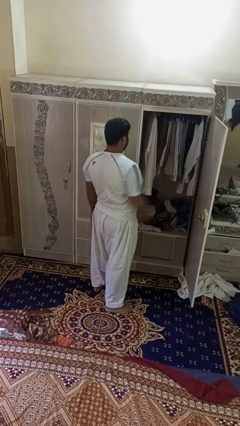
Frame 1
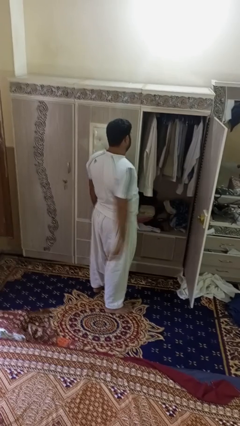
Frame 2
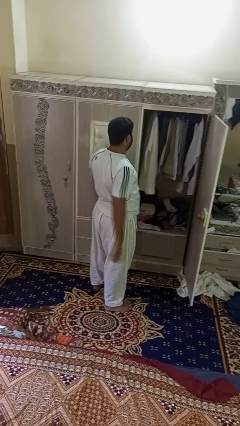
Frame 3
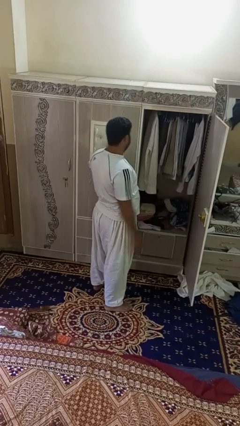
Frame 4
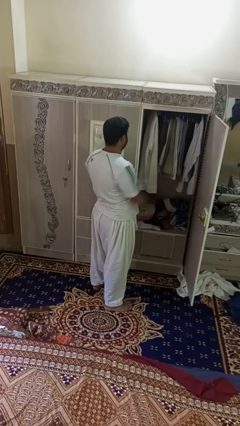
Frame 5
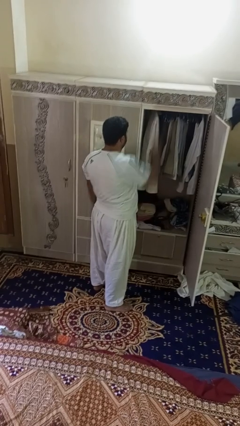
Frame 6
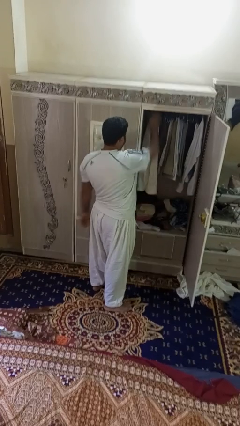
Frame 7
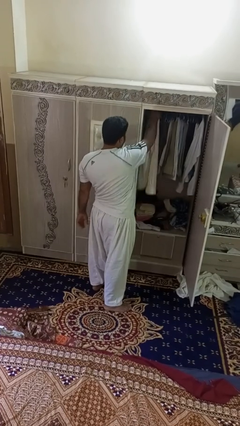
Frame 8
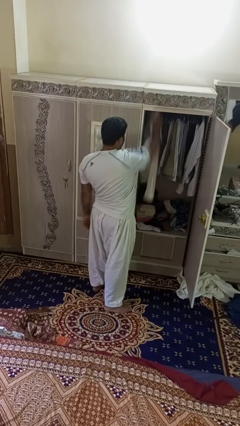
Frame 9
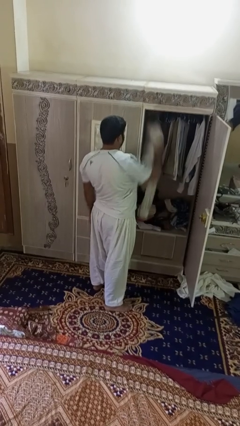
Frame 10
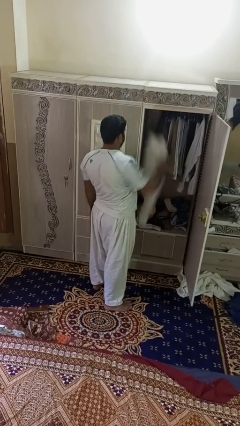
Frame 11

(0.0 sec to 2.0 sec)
person takes clothes from closet

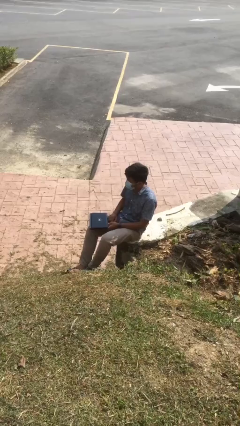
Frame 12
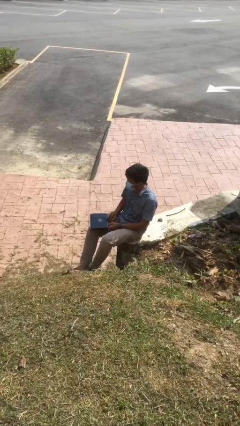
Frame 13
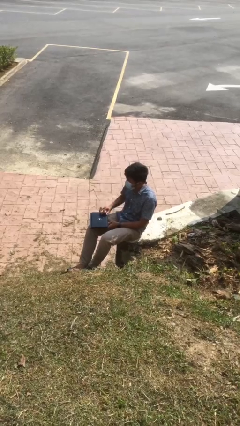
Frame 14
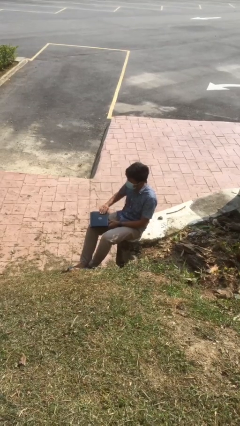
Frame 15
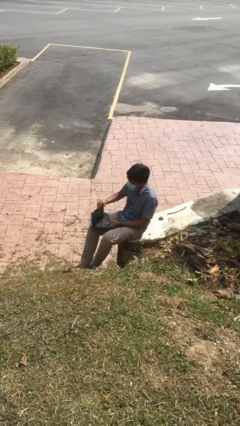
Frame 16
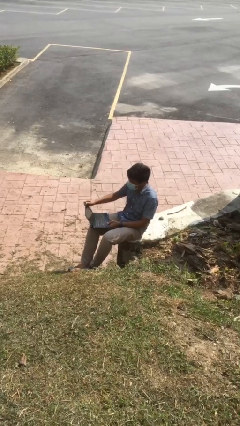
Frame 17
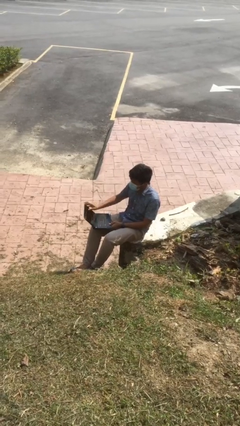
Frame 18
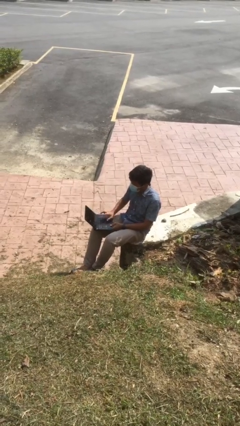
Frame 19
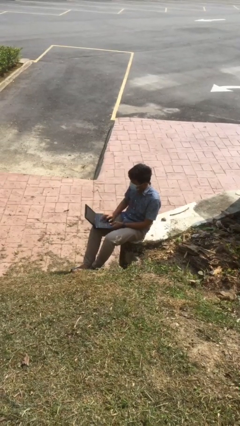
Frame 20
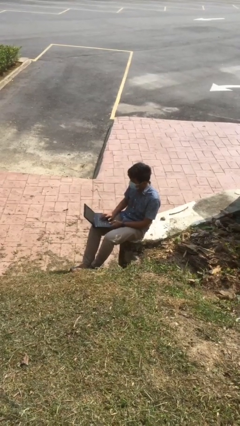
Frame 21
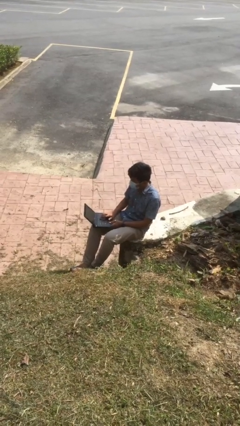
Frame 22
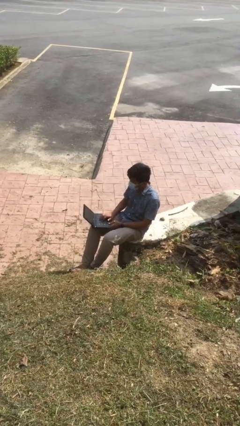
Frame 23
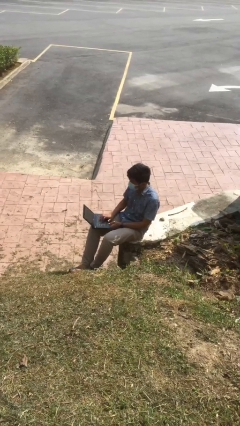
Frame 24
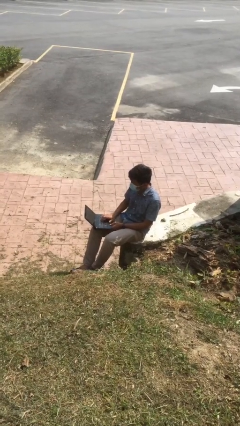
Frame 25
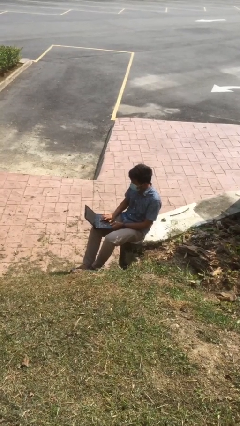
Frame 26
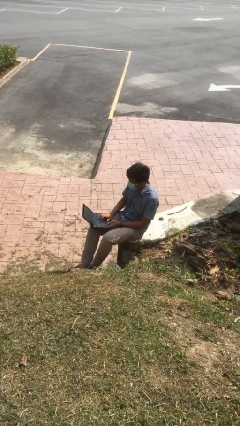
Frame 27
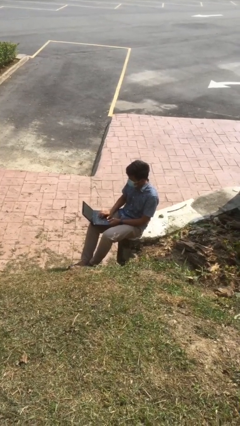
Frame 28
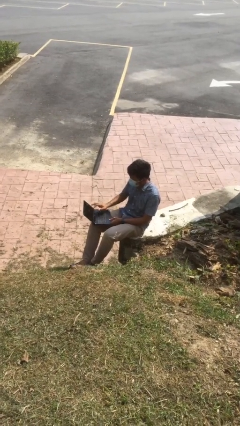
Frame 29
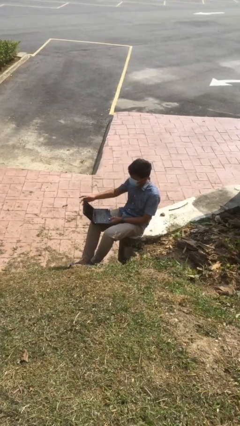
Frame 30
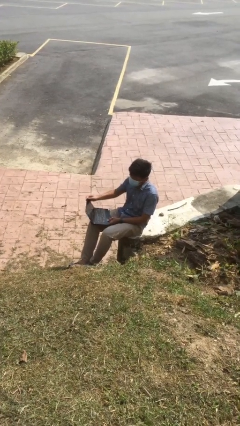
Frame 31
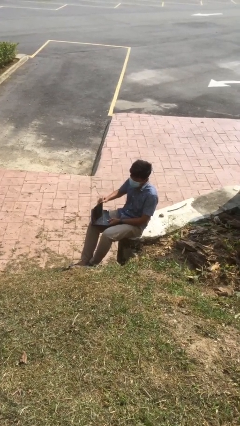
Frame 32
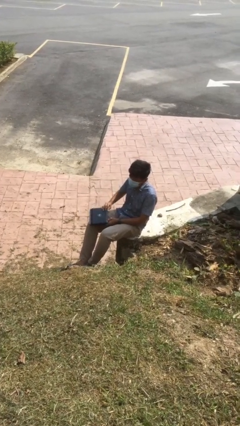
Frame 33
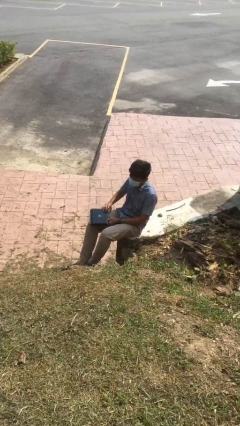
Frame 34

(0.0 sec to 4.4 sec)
person interacts with laptop

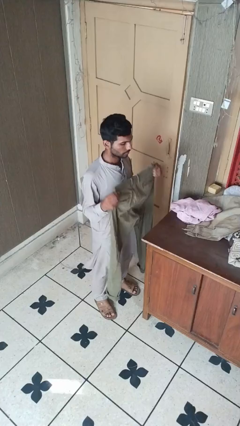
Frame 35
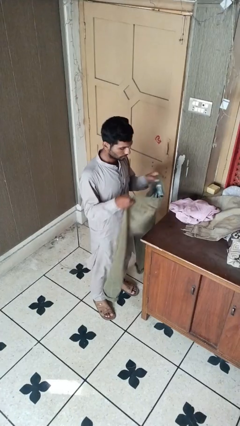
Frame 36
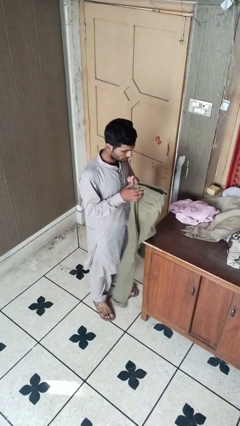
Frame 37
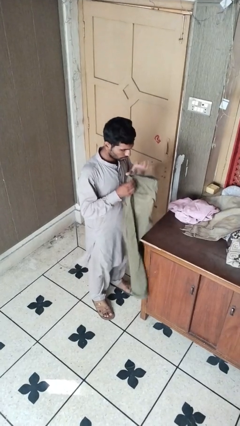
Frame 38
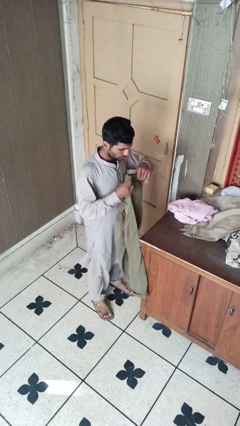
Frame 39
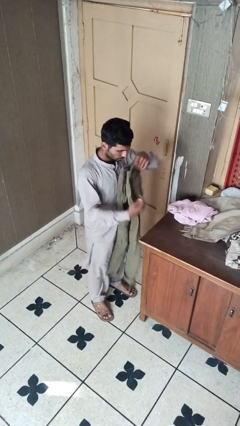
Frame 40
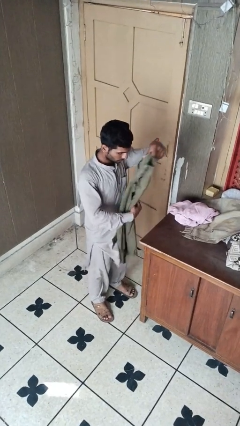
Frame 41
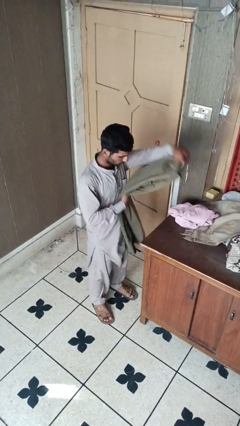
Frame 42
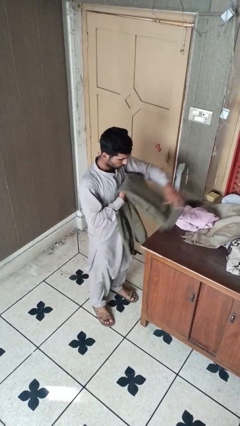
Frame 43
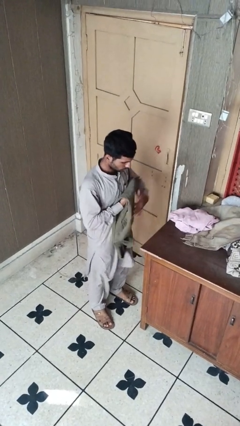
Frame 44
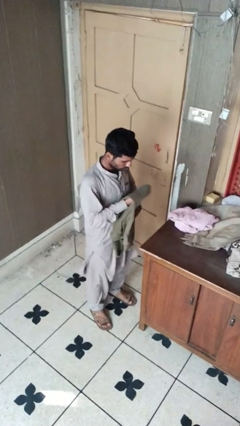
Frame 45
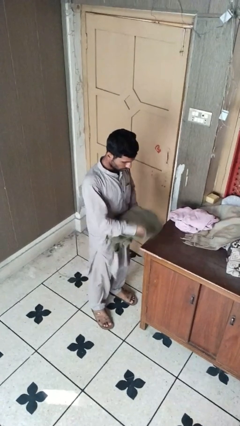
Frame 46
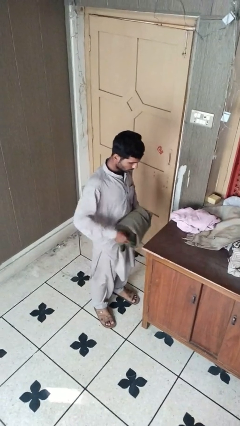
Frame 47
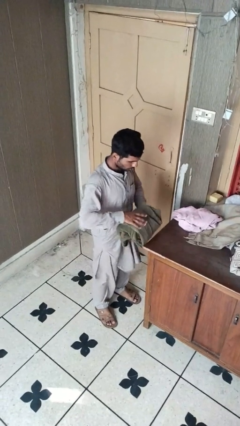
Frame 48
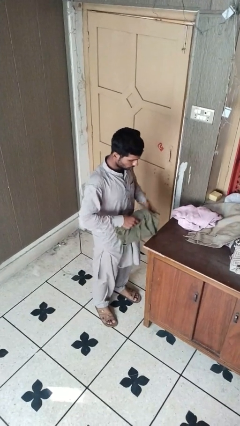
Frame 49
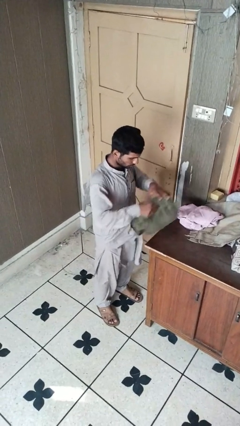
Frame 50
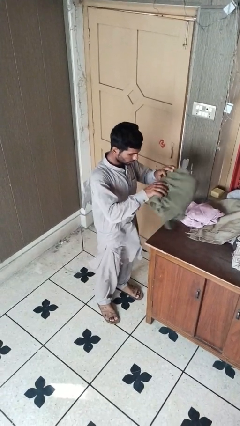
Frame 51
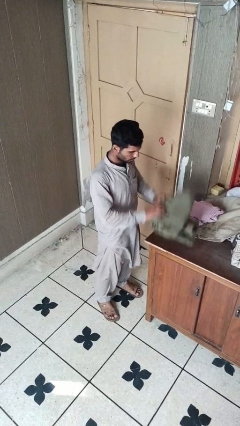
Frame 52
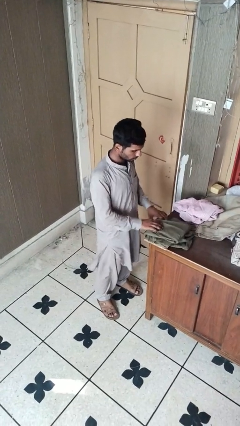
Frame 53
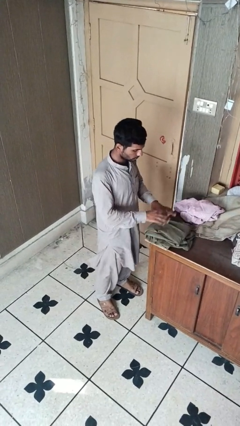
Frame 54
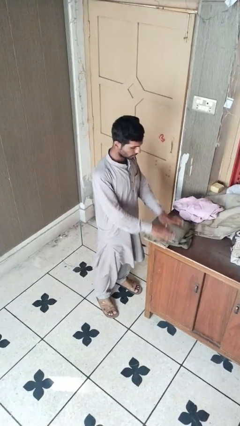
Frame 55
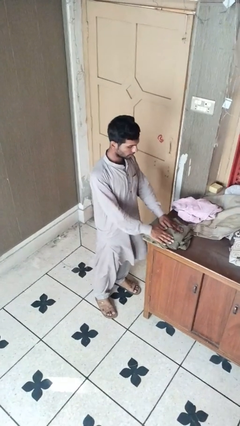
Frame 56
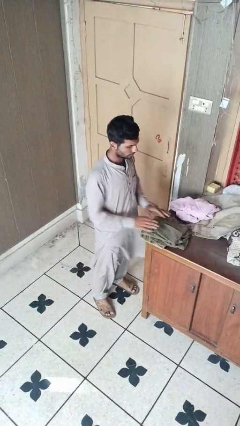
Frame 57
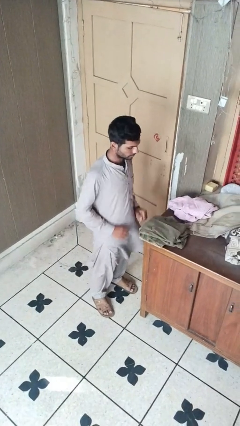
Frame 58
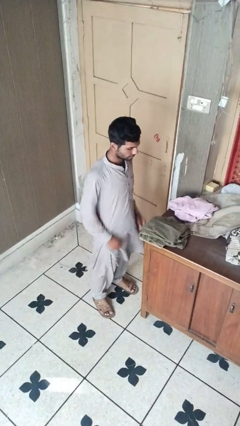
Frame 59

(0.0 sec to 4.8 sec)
person folds pants

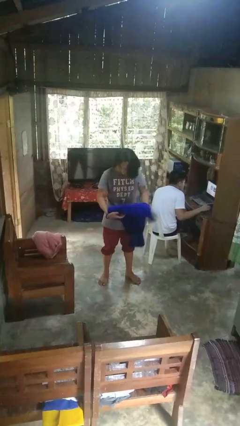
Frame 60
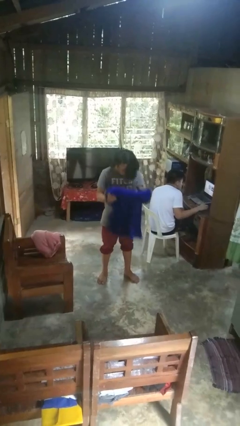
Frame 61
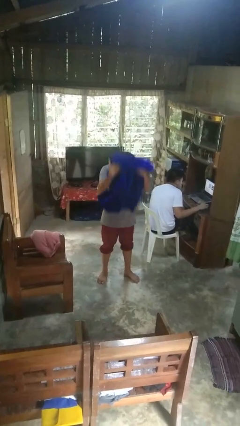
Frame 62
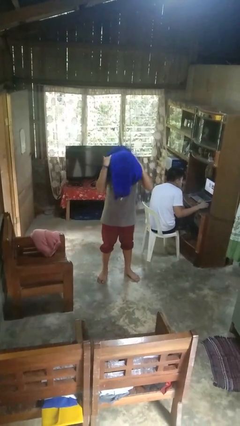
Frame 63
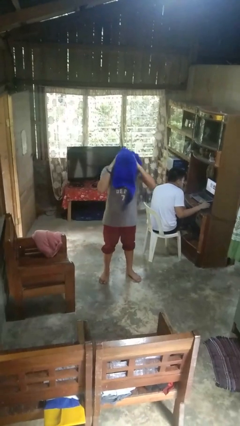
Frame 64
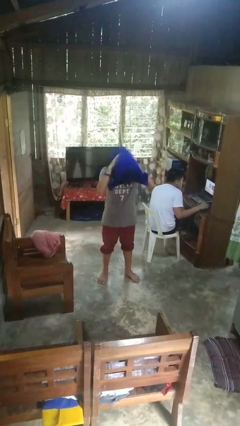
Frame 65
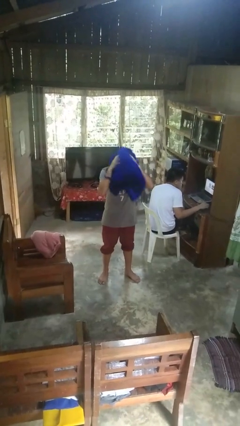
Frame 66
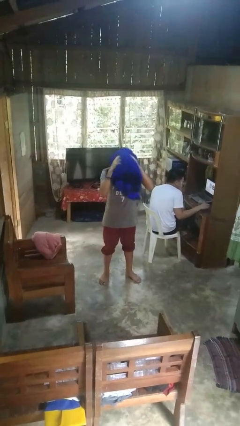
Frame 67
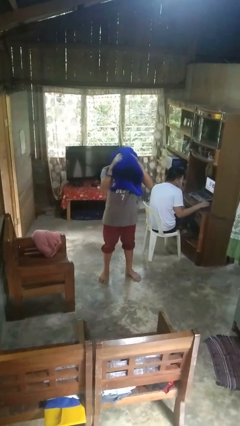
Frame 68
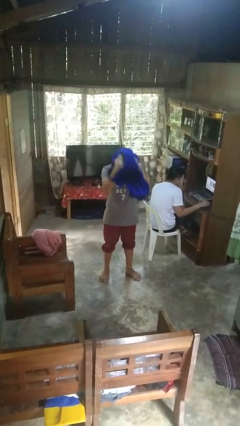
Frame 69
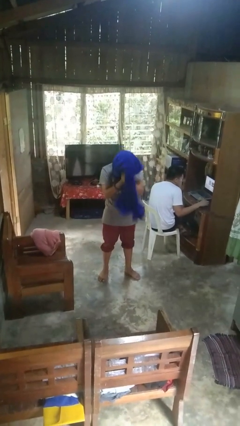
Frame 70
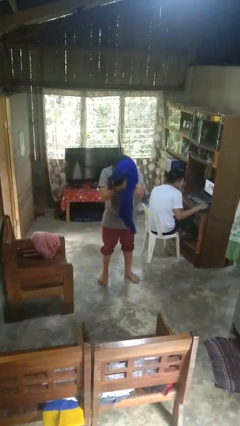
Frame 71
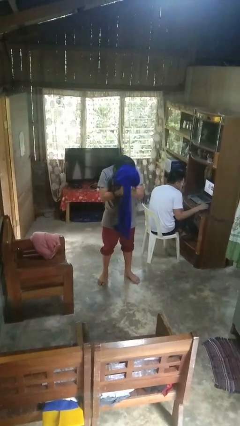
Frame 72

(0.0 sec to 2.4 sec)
person dries hair with towel

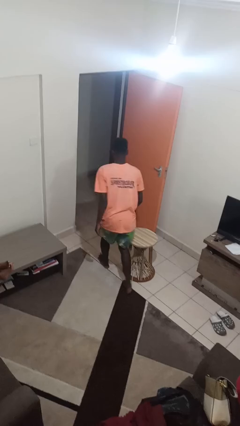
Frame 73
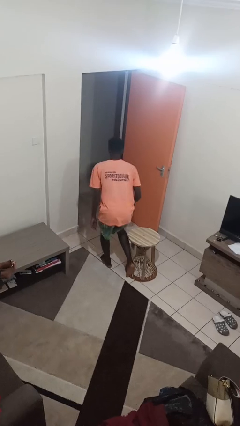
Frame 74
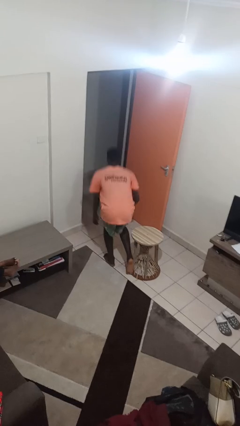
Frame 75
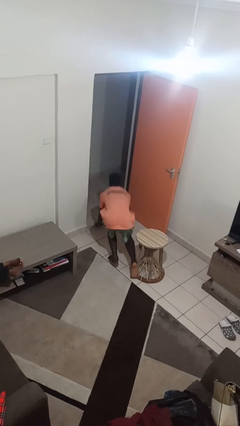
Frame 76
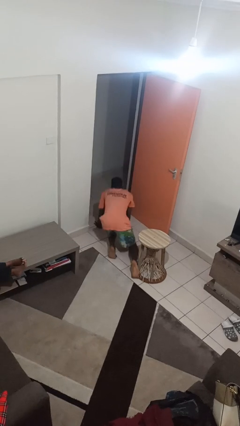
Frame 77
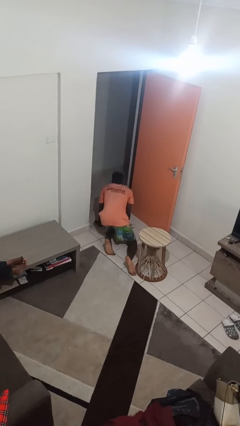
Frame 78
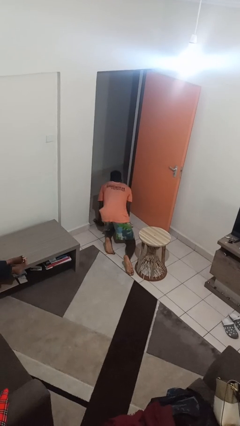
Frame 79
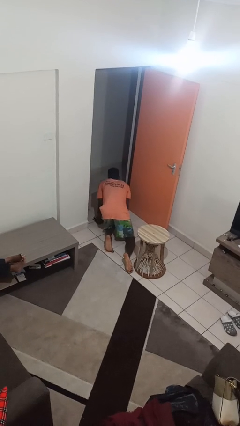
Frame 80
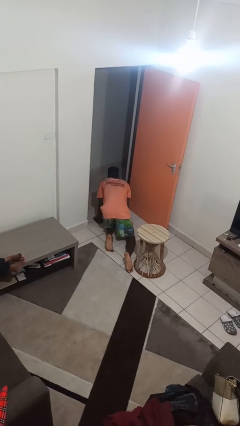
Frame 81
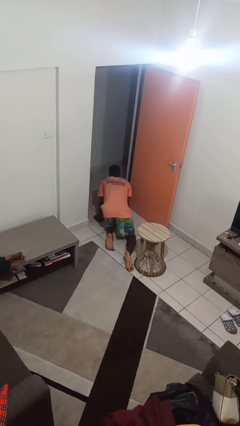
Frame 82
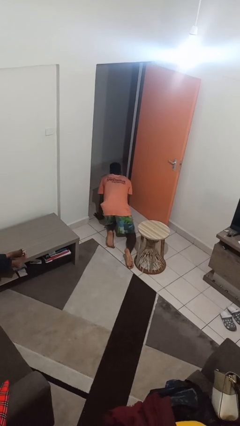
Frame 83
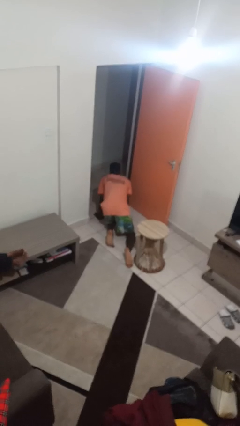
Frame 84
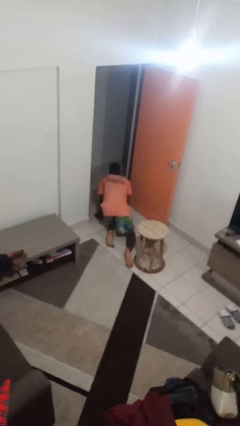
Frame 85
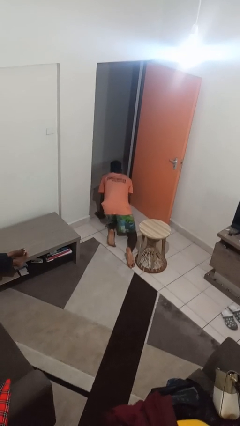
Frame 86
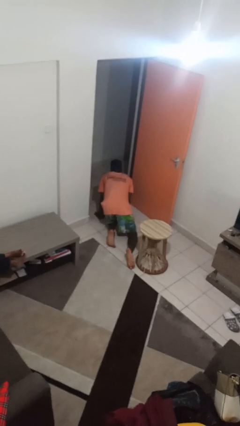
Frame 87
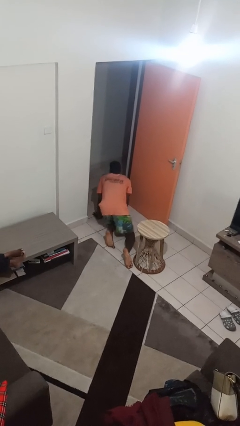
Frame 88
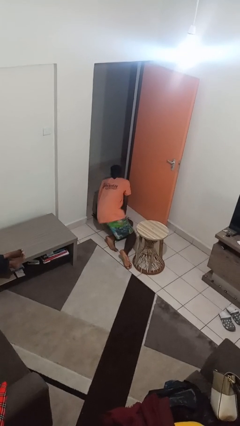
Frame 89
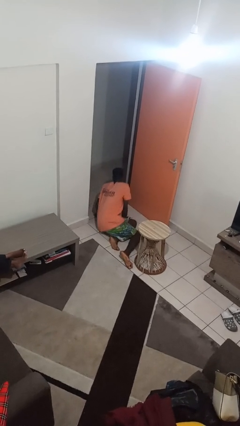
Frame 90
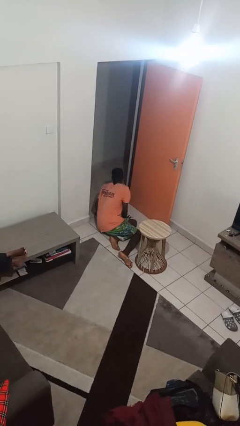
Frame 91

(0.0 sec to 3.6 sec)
person trips on object on floor

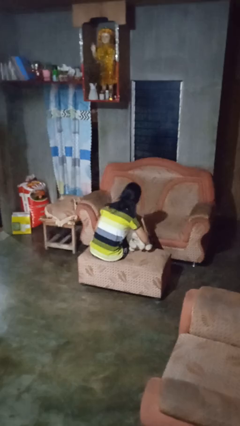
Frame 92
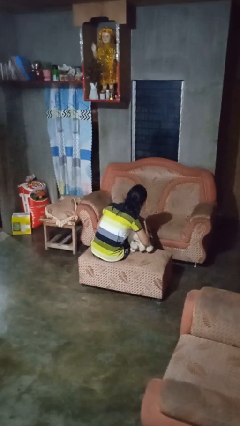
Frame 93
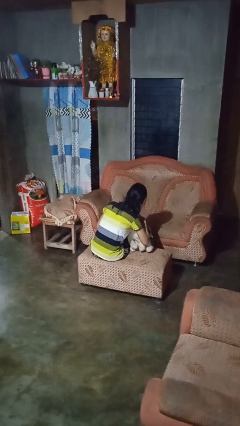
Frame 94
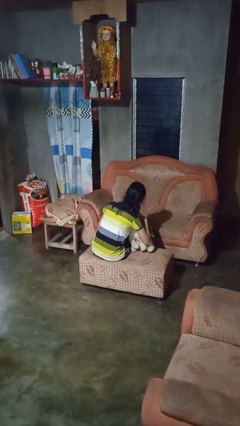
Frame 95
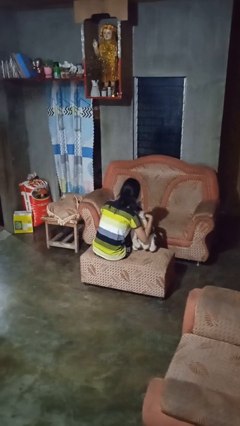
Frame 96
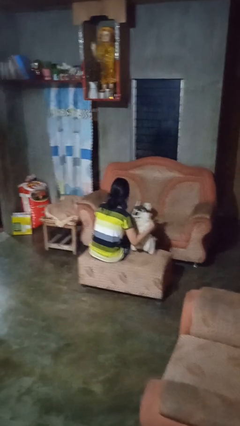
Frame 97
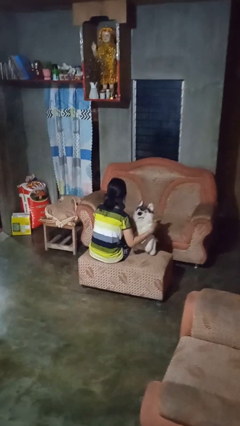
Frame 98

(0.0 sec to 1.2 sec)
person hugs stuffed animal
